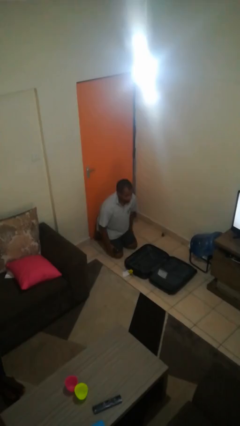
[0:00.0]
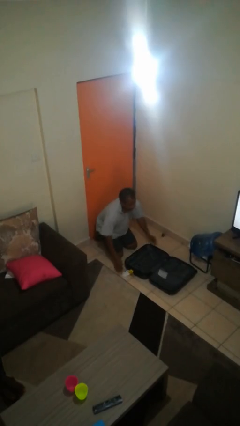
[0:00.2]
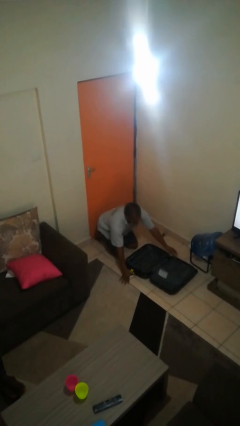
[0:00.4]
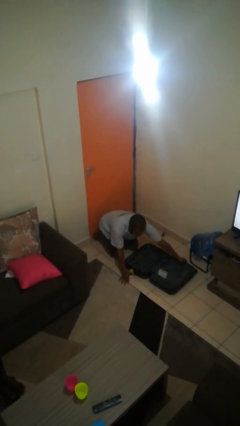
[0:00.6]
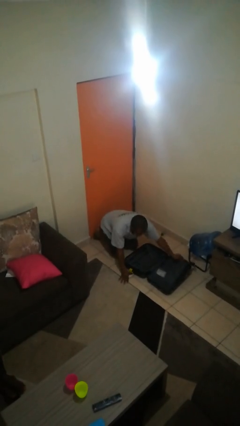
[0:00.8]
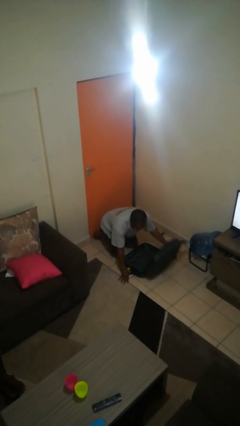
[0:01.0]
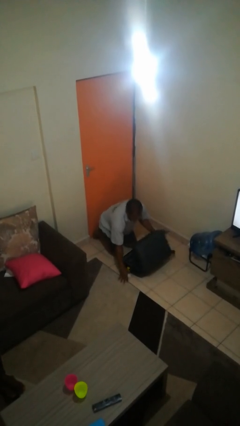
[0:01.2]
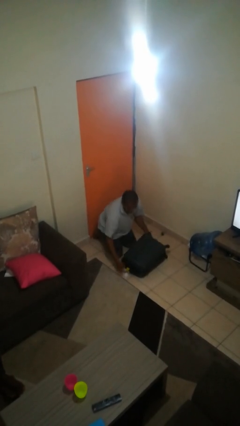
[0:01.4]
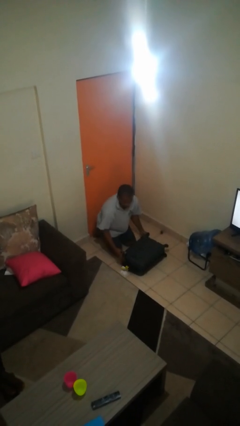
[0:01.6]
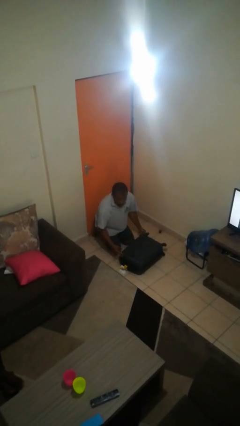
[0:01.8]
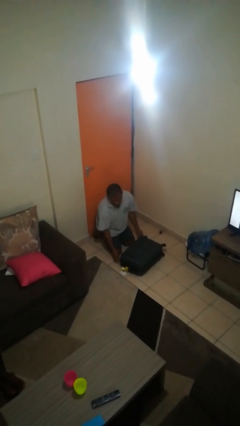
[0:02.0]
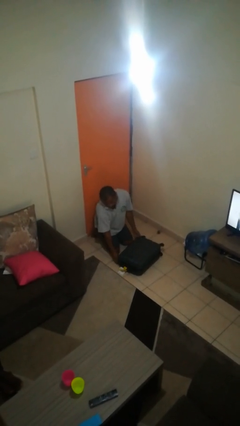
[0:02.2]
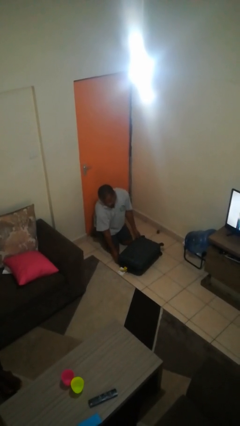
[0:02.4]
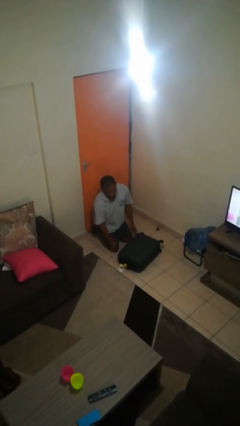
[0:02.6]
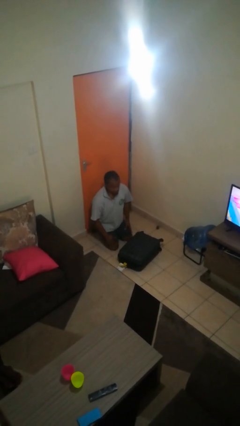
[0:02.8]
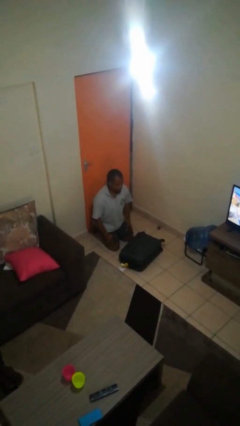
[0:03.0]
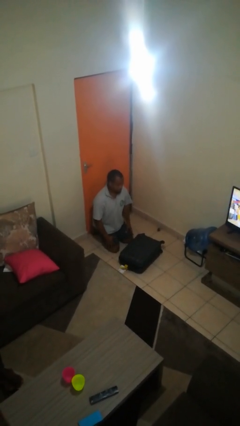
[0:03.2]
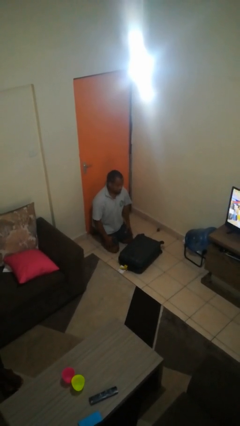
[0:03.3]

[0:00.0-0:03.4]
person closes suitcase

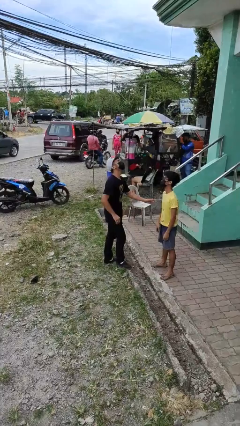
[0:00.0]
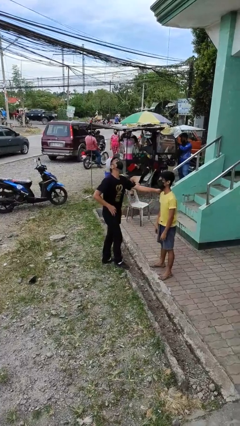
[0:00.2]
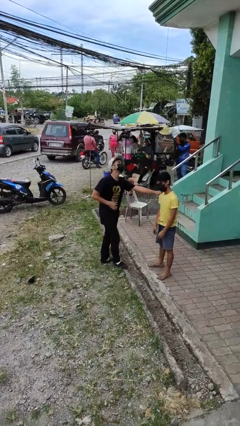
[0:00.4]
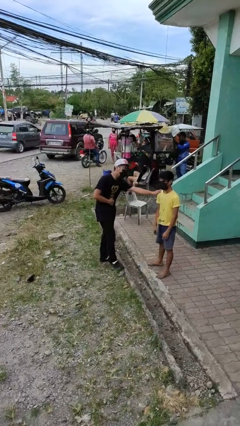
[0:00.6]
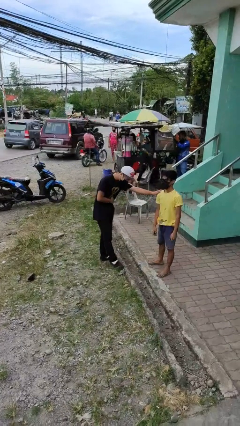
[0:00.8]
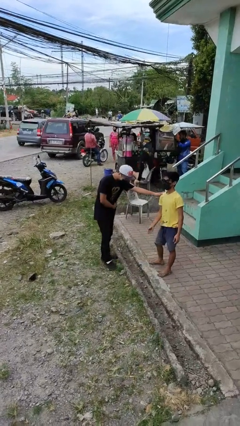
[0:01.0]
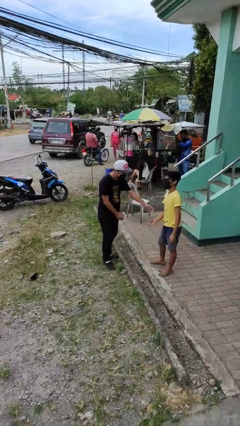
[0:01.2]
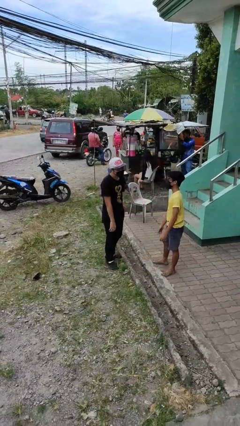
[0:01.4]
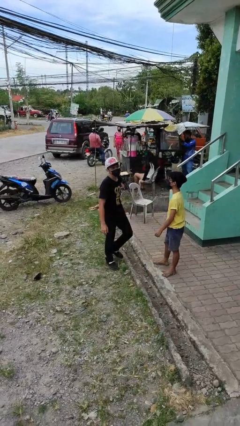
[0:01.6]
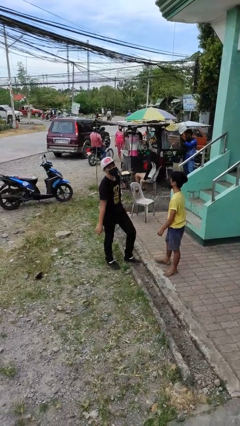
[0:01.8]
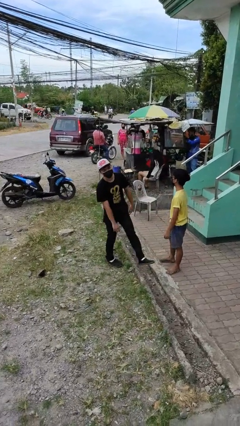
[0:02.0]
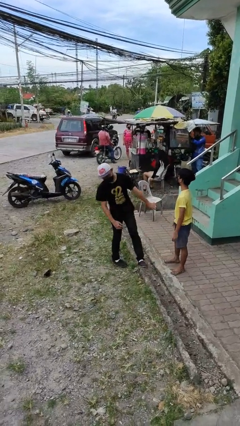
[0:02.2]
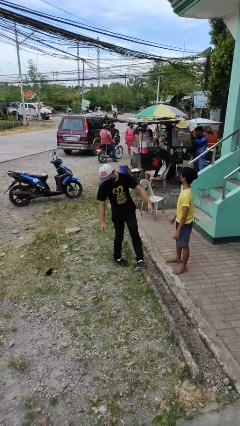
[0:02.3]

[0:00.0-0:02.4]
person laughs with person

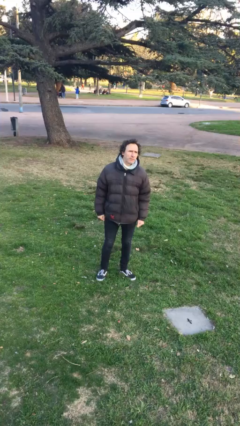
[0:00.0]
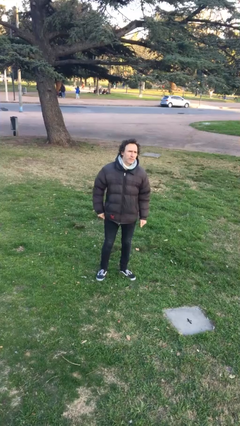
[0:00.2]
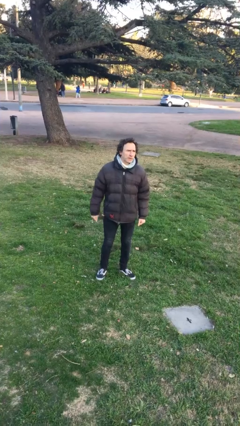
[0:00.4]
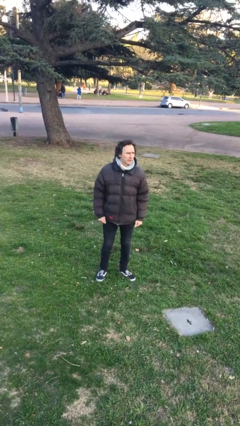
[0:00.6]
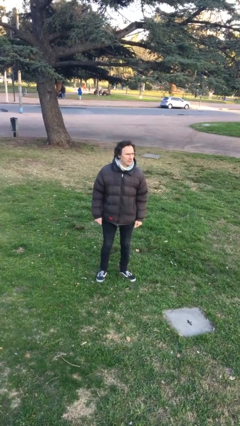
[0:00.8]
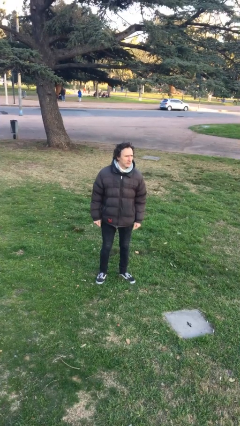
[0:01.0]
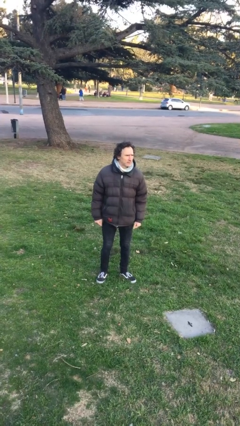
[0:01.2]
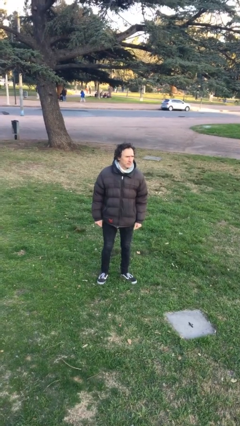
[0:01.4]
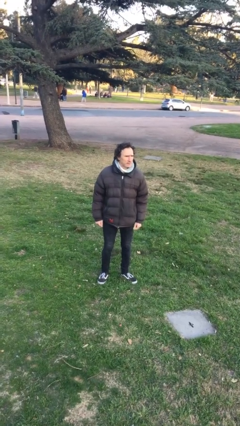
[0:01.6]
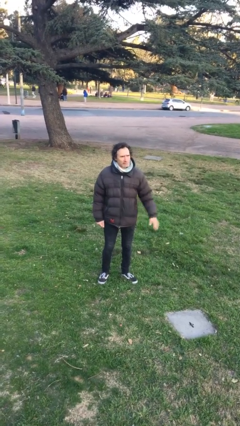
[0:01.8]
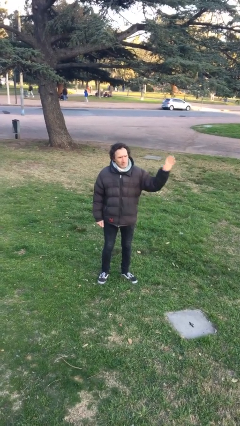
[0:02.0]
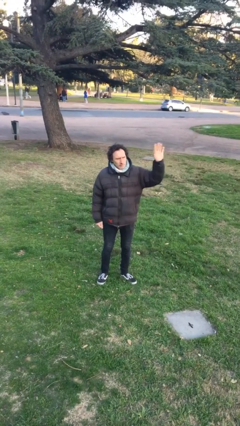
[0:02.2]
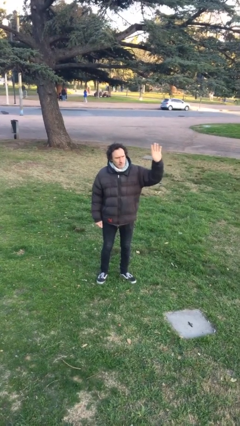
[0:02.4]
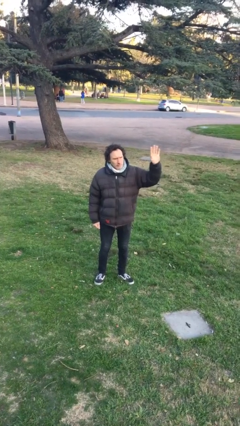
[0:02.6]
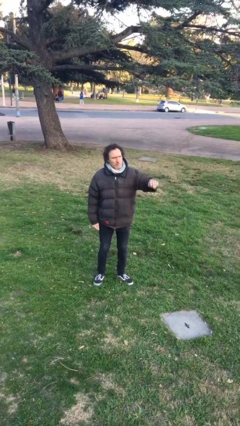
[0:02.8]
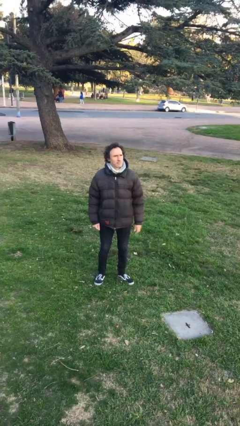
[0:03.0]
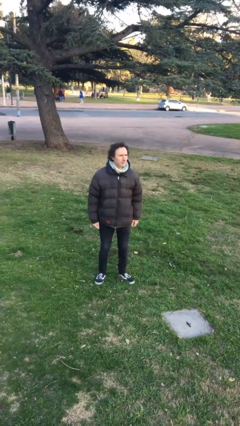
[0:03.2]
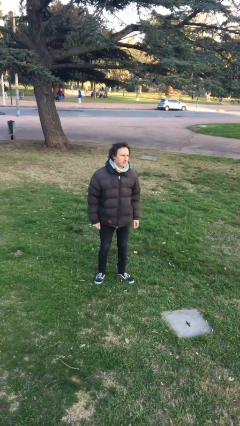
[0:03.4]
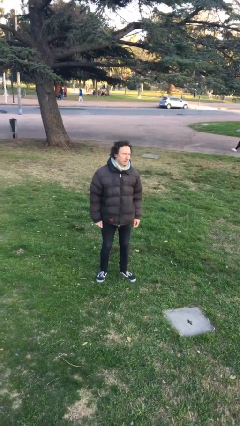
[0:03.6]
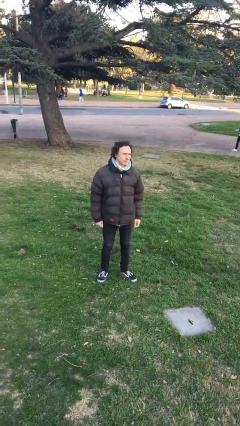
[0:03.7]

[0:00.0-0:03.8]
person waves at person

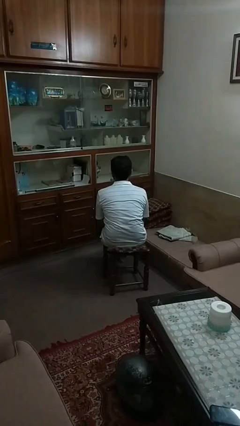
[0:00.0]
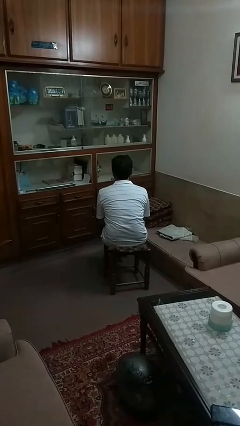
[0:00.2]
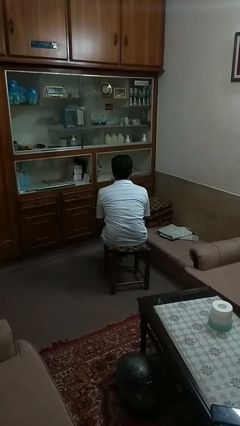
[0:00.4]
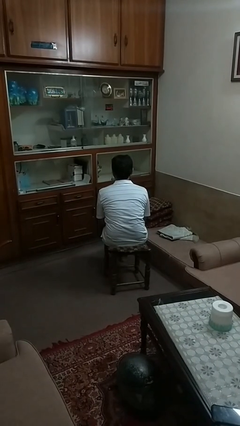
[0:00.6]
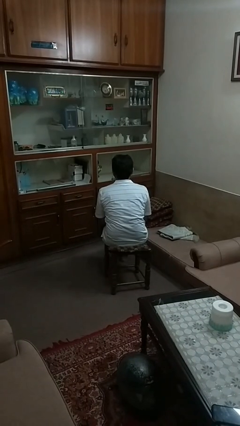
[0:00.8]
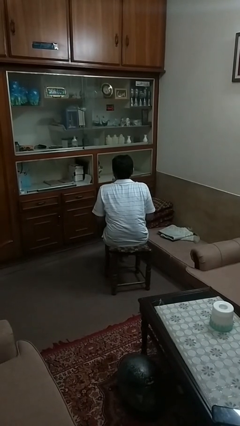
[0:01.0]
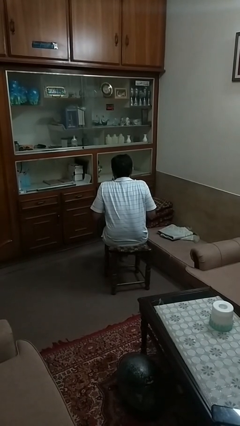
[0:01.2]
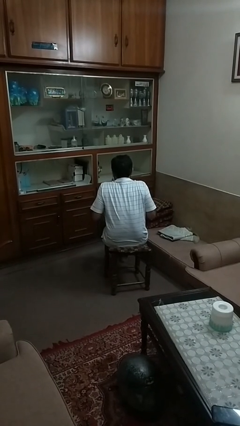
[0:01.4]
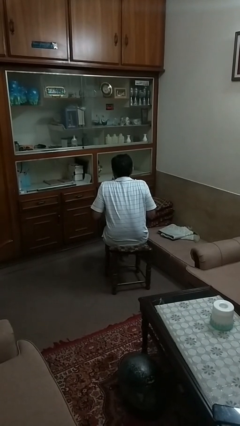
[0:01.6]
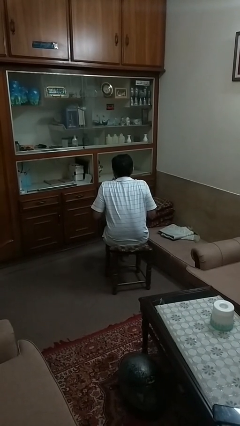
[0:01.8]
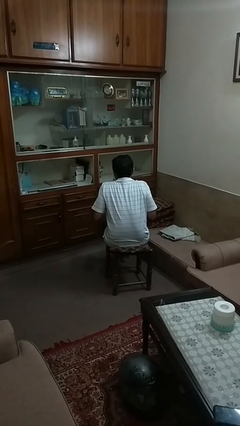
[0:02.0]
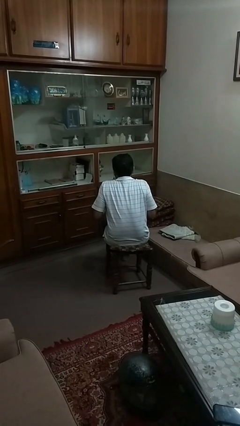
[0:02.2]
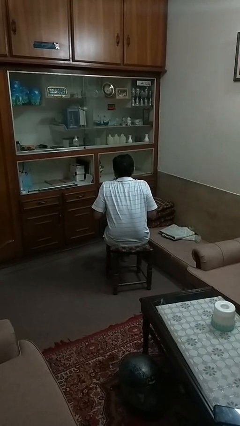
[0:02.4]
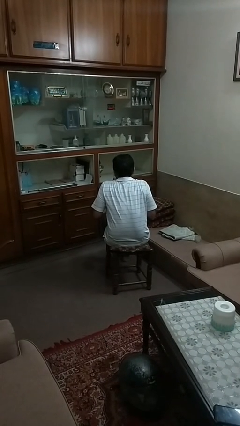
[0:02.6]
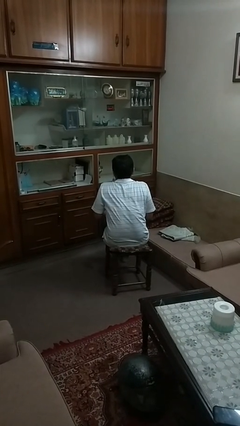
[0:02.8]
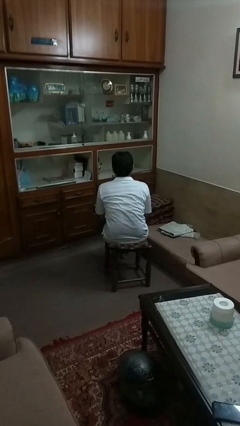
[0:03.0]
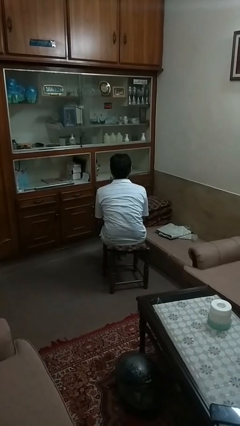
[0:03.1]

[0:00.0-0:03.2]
person shrugs

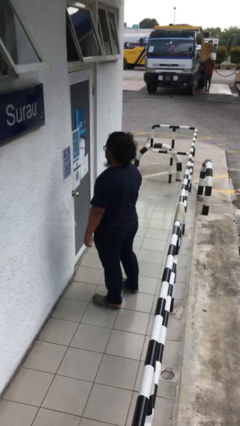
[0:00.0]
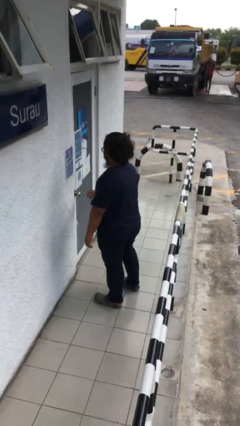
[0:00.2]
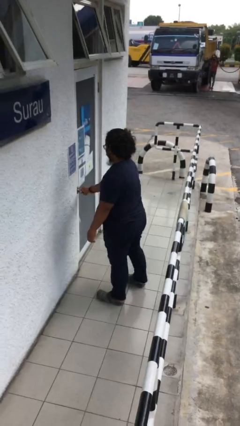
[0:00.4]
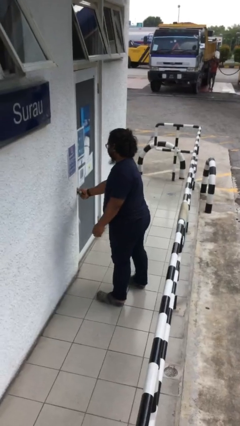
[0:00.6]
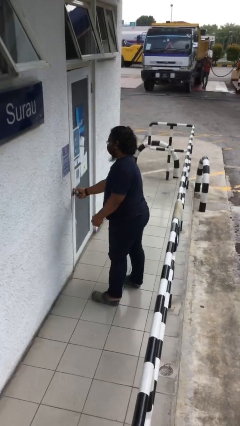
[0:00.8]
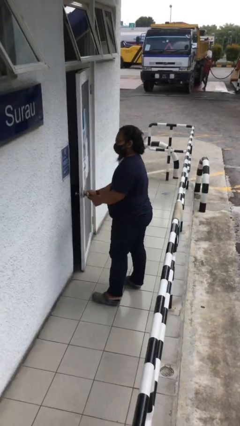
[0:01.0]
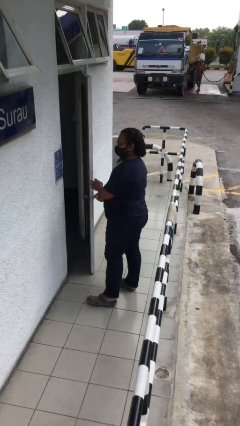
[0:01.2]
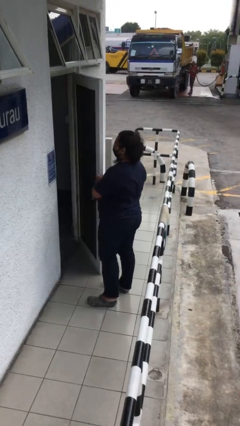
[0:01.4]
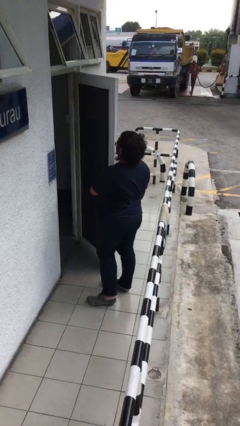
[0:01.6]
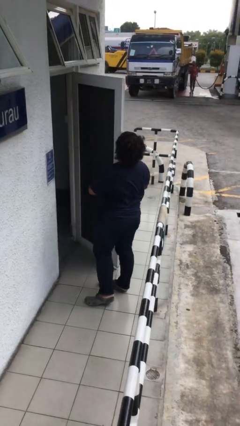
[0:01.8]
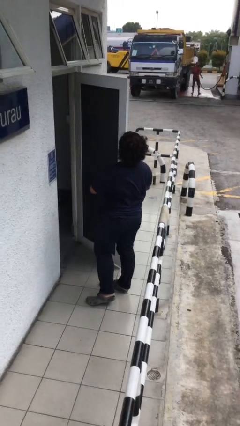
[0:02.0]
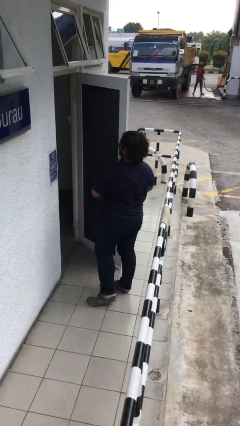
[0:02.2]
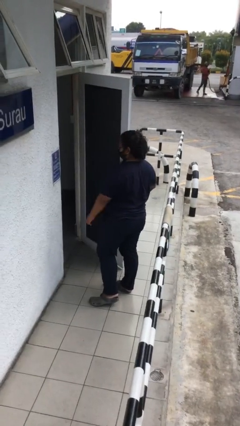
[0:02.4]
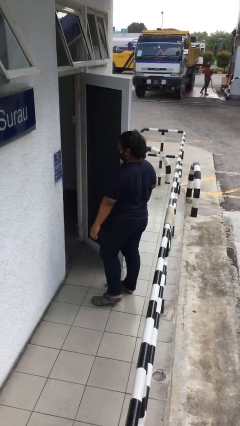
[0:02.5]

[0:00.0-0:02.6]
person opens facility door

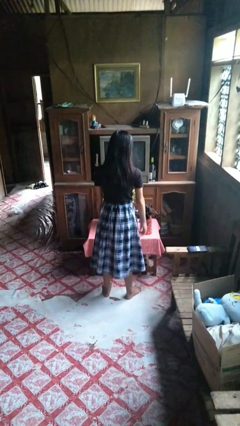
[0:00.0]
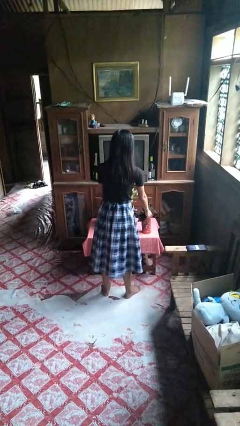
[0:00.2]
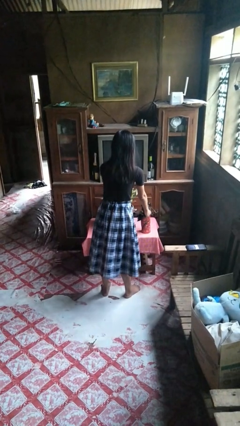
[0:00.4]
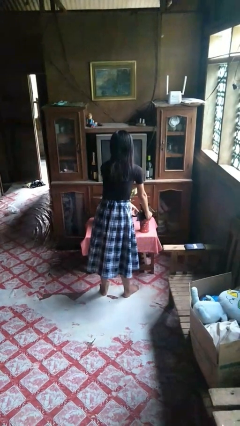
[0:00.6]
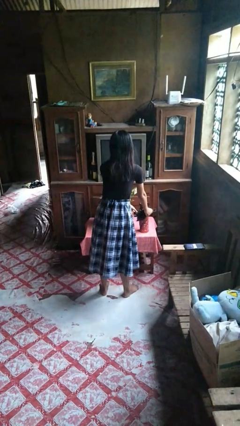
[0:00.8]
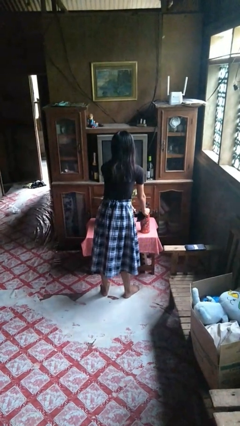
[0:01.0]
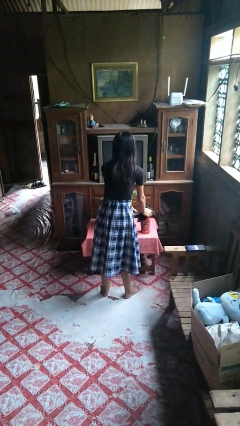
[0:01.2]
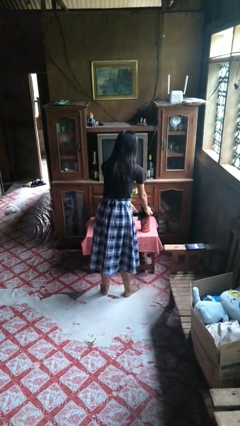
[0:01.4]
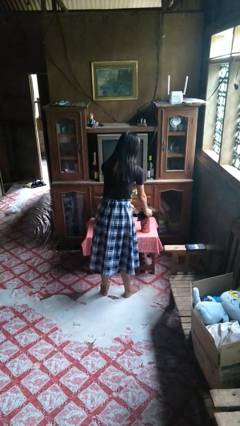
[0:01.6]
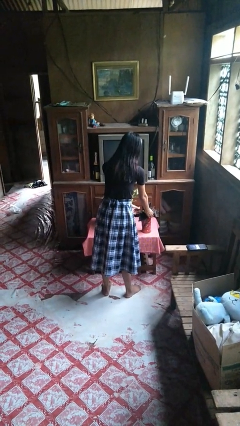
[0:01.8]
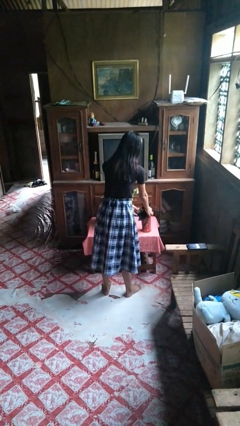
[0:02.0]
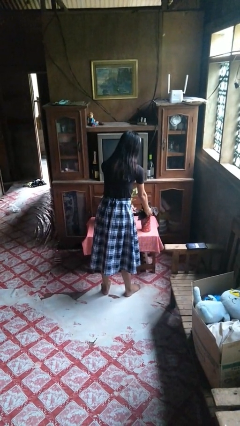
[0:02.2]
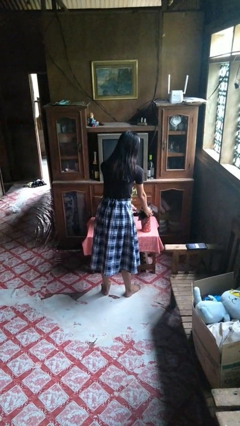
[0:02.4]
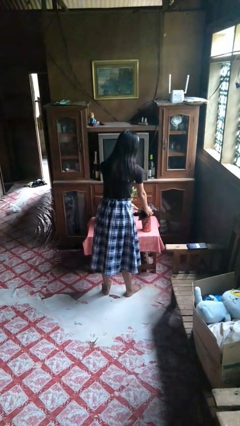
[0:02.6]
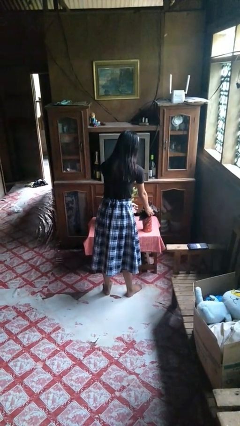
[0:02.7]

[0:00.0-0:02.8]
person arranges flowers in vase
